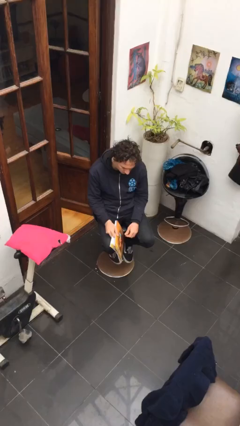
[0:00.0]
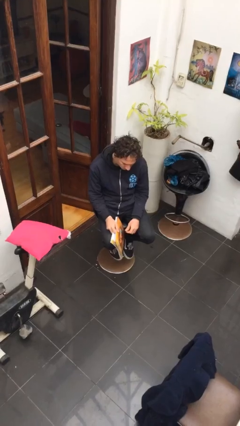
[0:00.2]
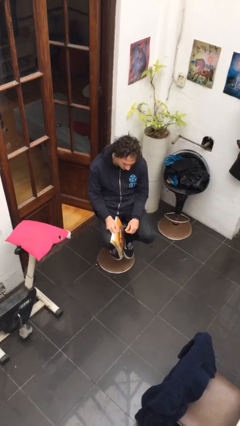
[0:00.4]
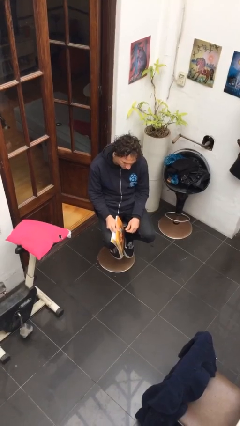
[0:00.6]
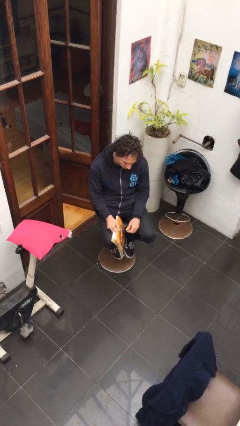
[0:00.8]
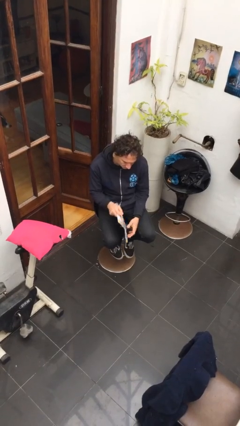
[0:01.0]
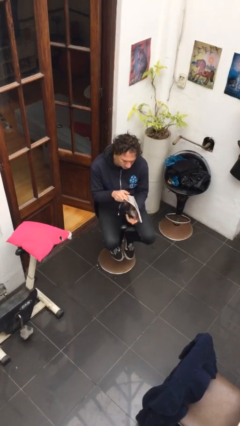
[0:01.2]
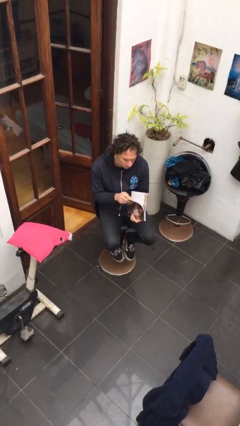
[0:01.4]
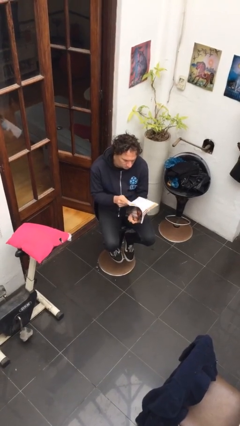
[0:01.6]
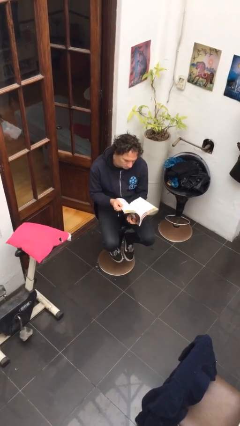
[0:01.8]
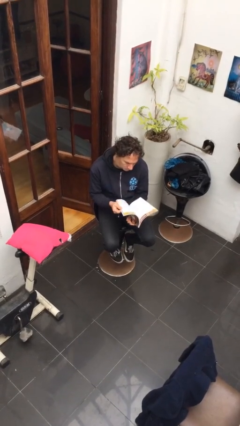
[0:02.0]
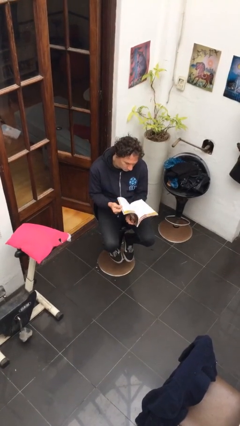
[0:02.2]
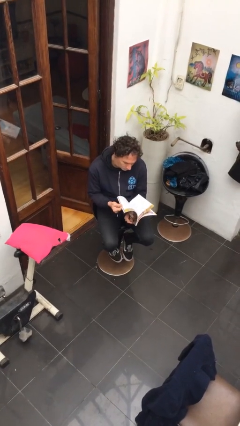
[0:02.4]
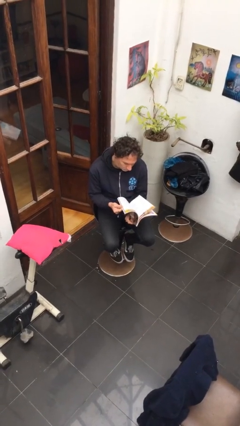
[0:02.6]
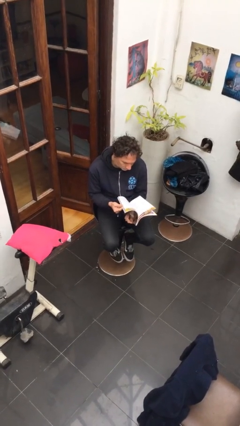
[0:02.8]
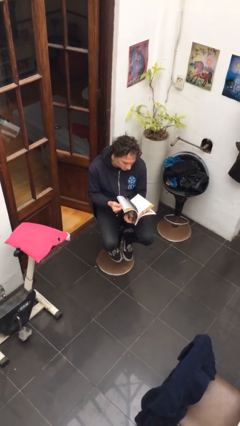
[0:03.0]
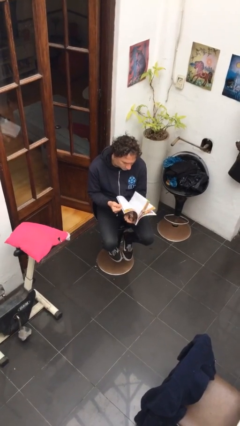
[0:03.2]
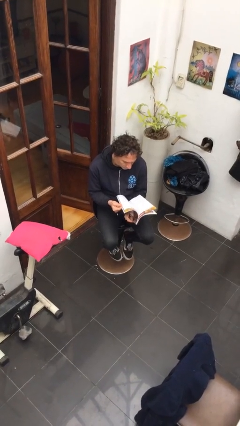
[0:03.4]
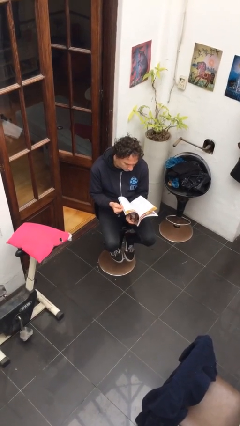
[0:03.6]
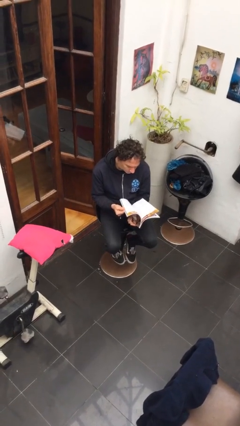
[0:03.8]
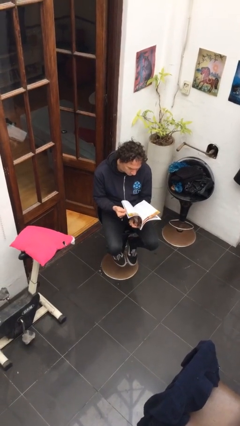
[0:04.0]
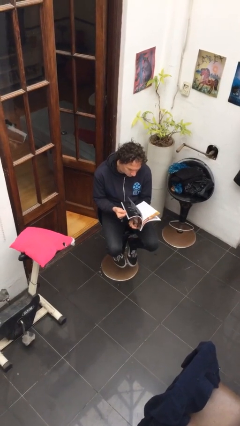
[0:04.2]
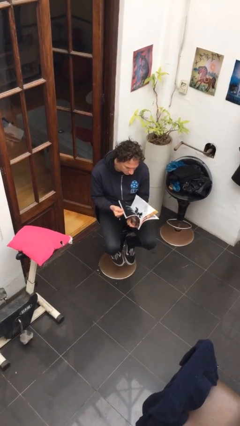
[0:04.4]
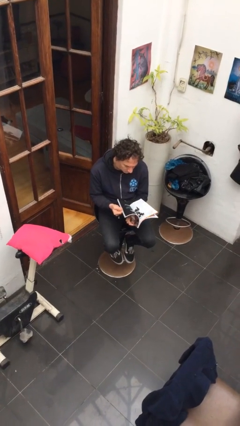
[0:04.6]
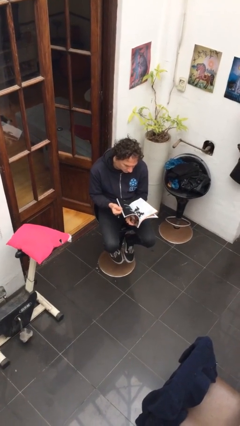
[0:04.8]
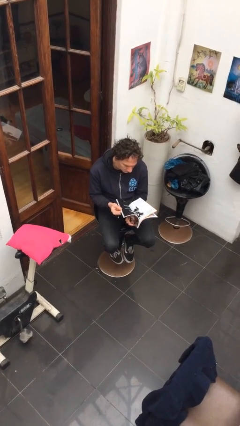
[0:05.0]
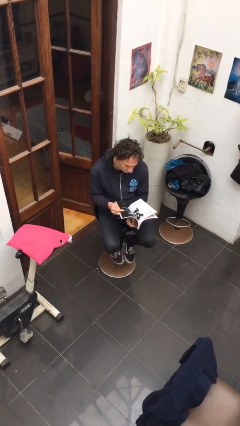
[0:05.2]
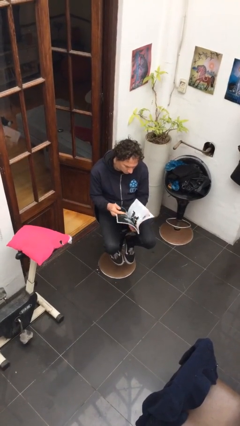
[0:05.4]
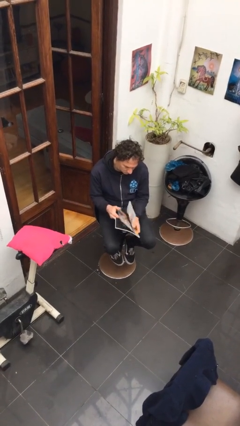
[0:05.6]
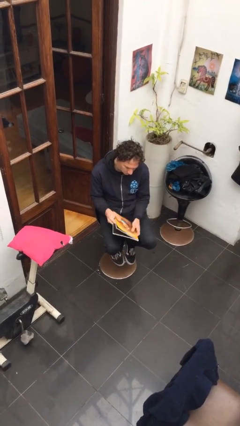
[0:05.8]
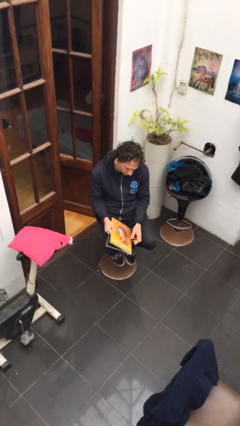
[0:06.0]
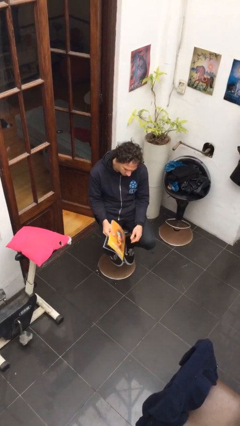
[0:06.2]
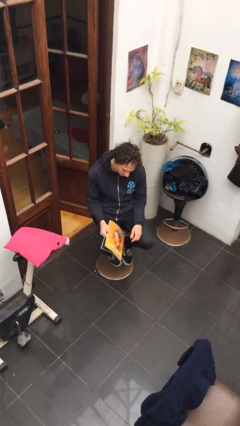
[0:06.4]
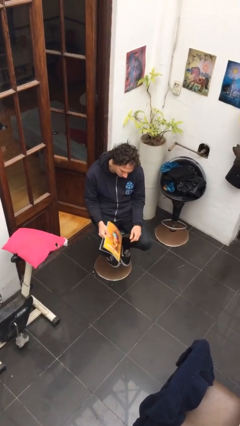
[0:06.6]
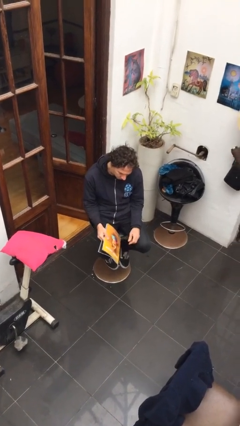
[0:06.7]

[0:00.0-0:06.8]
person reads magazine

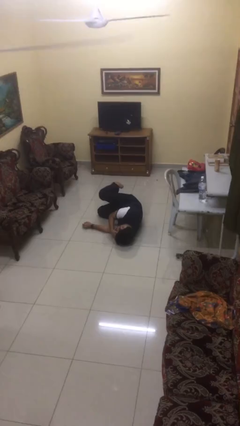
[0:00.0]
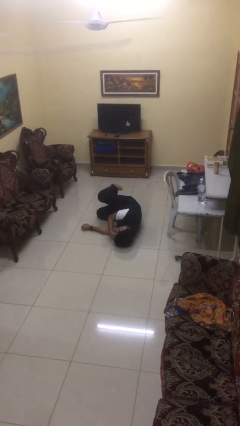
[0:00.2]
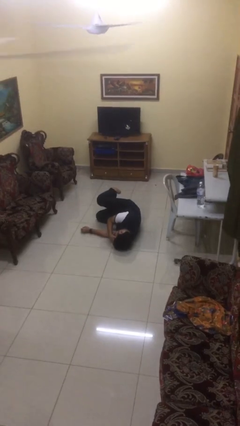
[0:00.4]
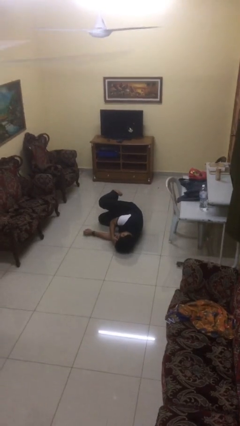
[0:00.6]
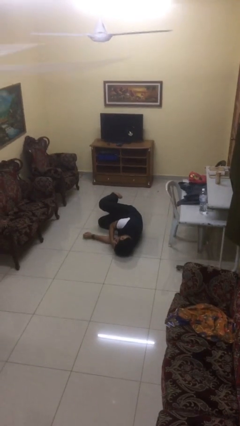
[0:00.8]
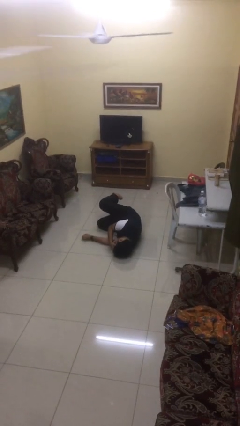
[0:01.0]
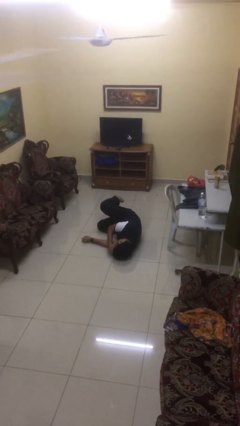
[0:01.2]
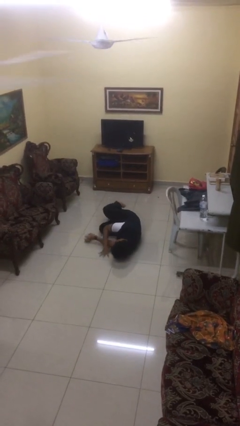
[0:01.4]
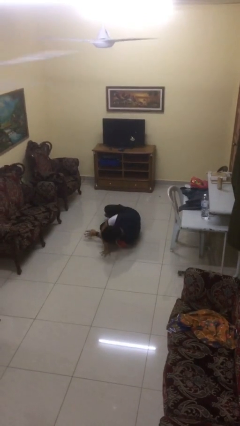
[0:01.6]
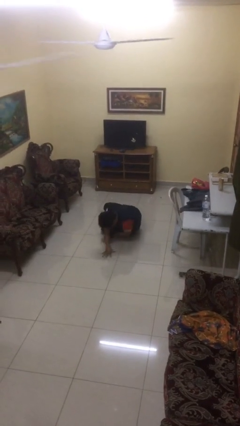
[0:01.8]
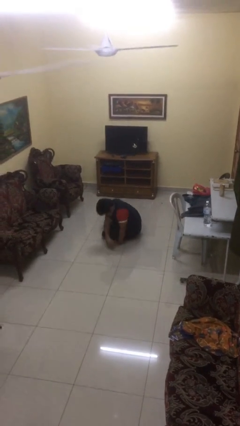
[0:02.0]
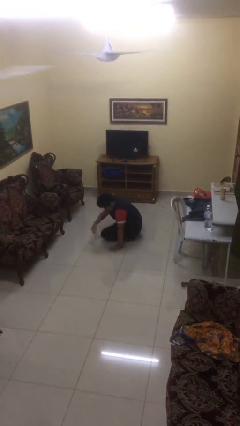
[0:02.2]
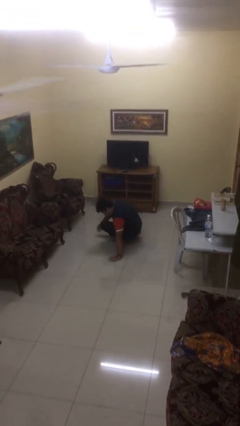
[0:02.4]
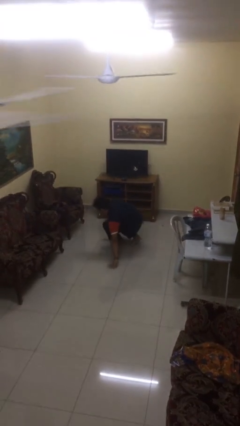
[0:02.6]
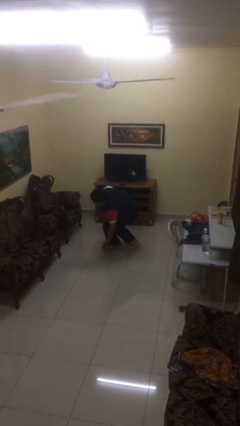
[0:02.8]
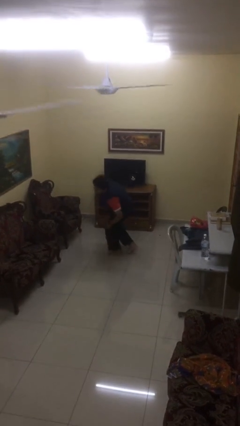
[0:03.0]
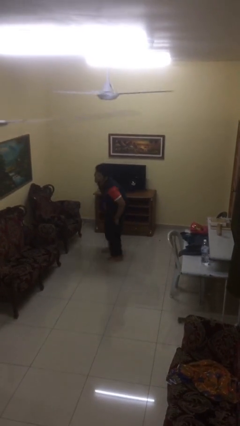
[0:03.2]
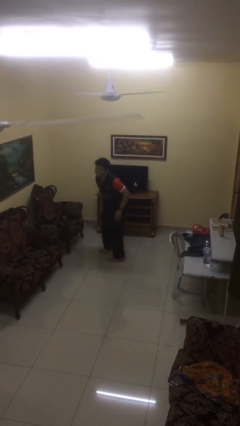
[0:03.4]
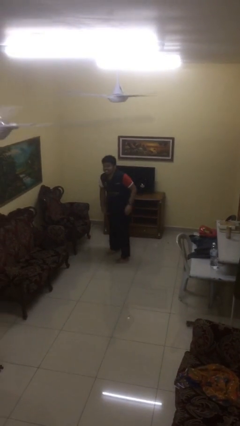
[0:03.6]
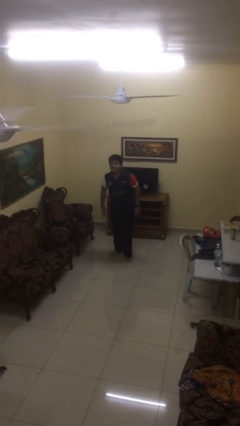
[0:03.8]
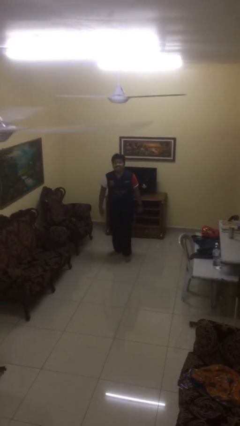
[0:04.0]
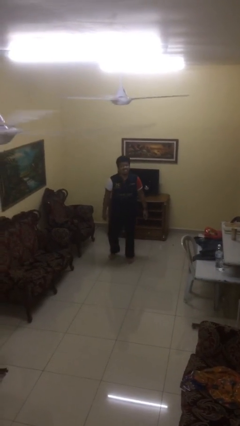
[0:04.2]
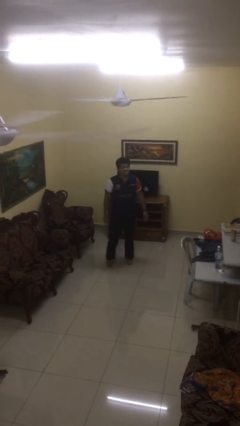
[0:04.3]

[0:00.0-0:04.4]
person stands up from floor

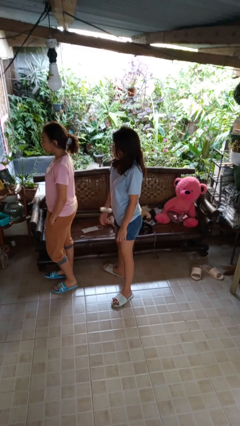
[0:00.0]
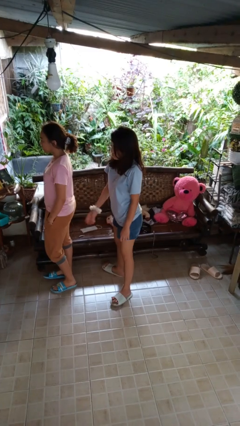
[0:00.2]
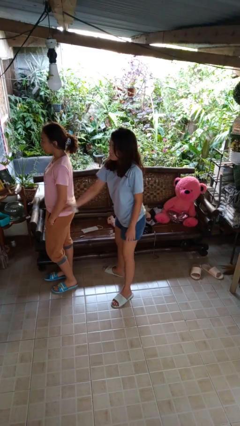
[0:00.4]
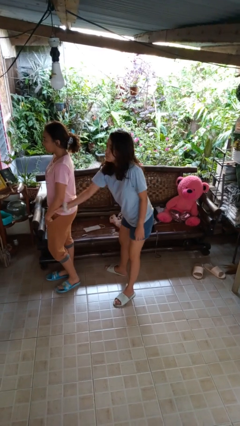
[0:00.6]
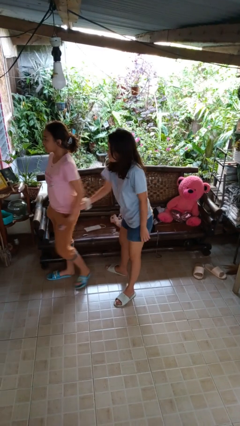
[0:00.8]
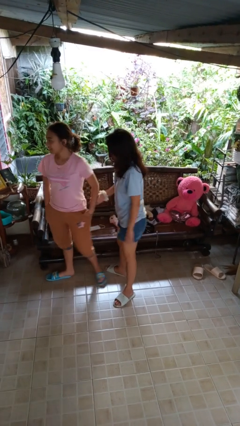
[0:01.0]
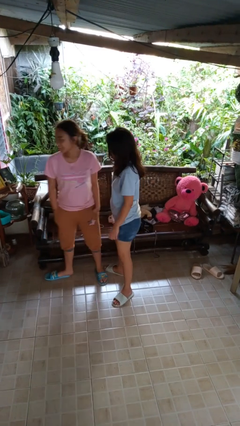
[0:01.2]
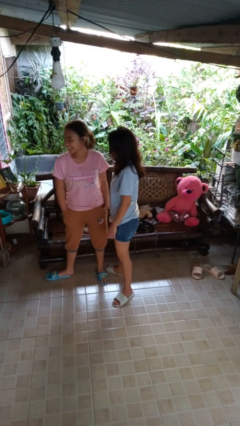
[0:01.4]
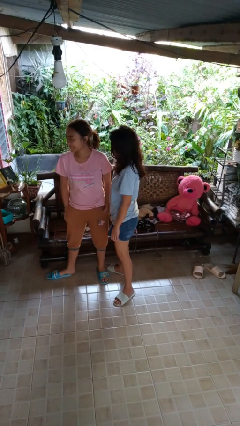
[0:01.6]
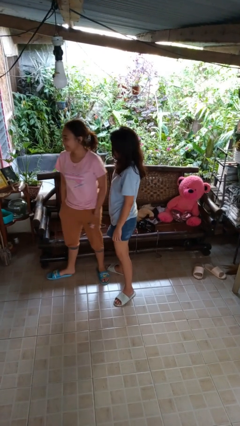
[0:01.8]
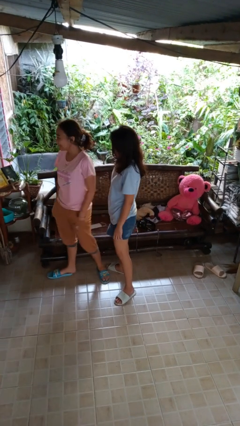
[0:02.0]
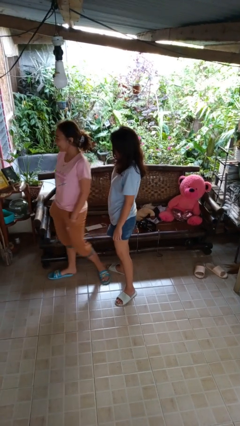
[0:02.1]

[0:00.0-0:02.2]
person grabs person by forearm

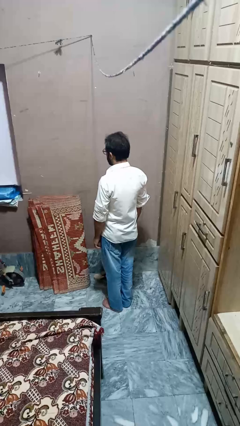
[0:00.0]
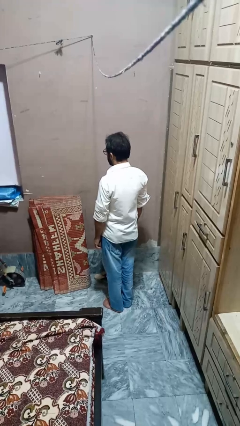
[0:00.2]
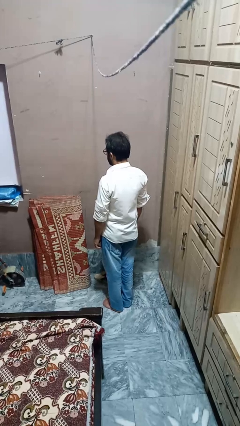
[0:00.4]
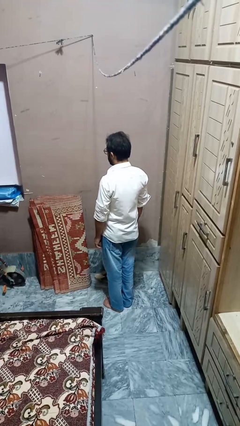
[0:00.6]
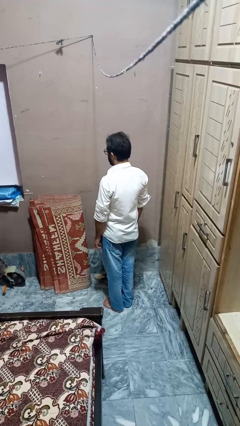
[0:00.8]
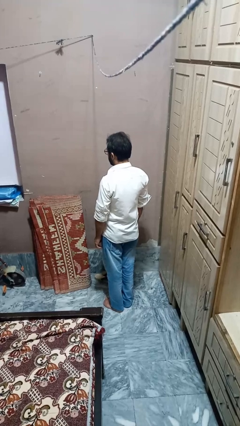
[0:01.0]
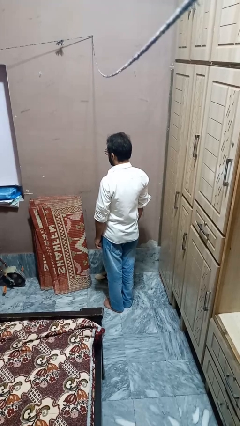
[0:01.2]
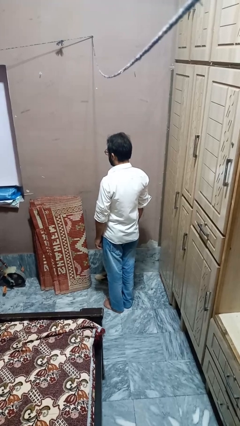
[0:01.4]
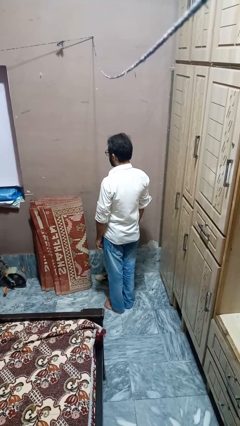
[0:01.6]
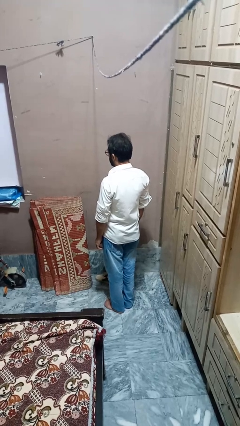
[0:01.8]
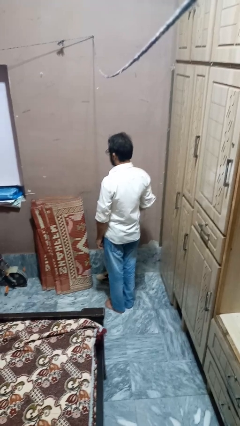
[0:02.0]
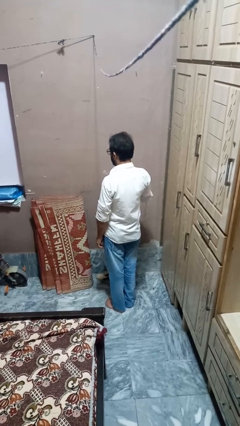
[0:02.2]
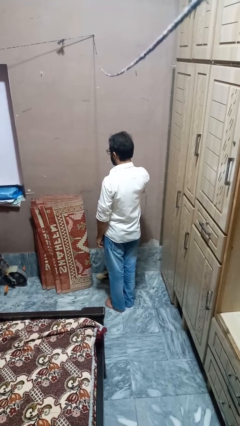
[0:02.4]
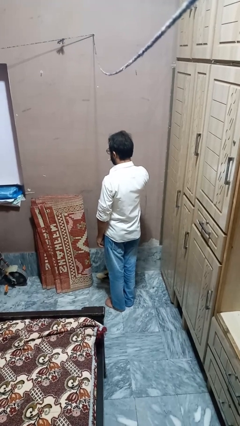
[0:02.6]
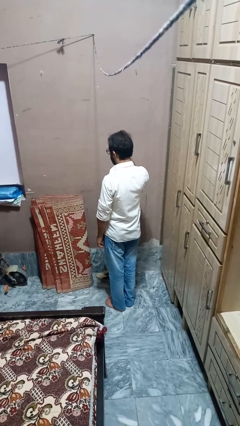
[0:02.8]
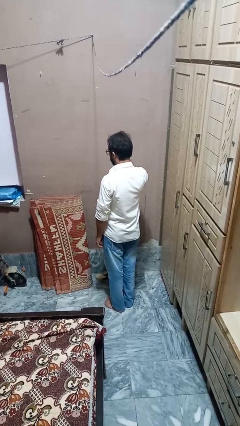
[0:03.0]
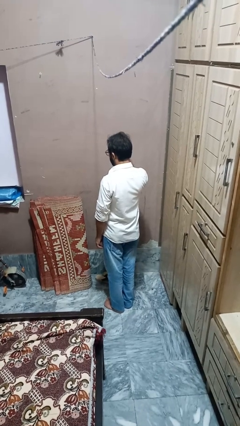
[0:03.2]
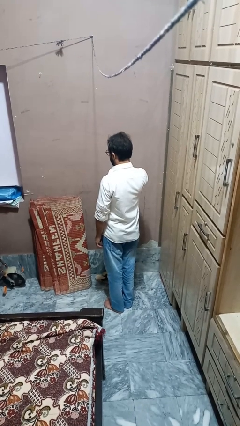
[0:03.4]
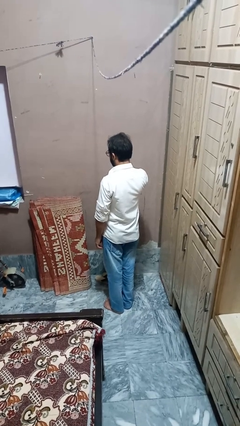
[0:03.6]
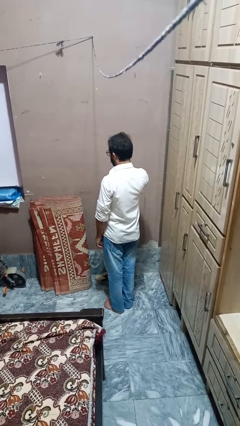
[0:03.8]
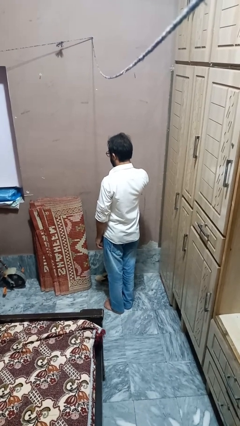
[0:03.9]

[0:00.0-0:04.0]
person brushes teeth

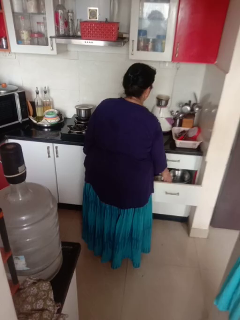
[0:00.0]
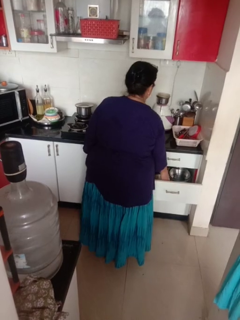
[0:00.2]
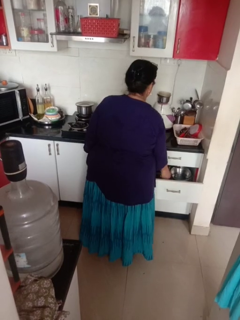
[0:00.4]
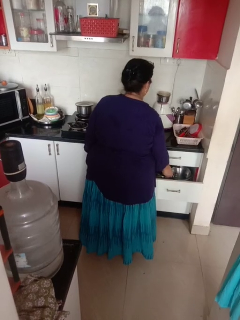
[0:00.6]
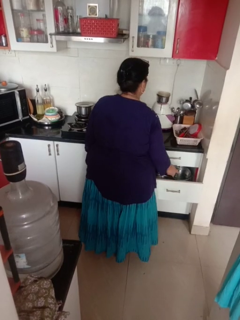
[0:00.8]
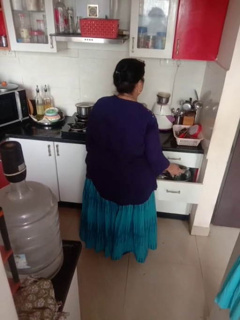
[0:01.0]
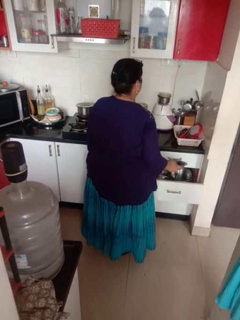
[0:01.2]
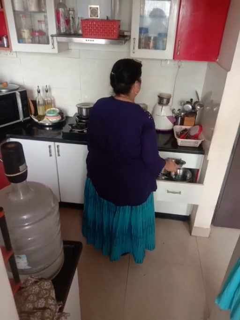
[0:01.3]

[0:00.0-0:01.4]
person takes object from kitchen drawer
